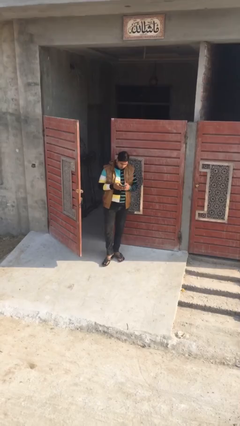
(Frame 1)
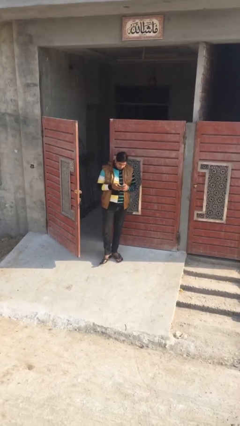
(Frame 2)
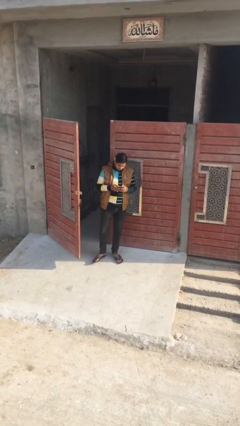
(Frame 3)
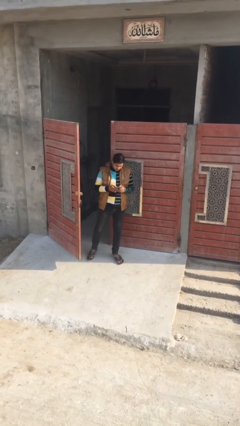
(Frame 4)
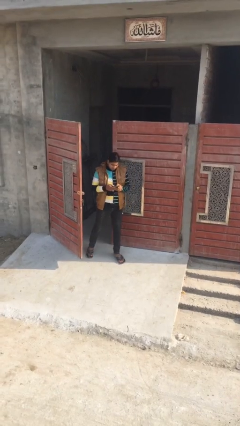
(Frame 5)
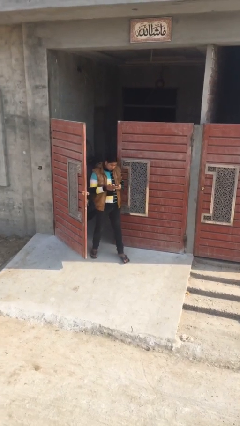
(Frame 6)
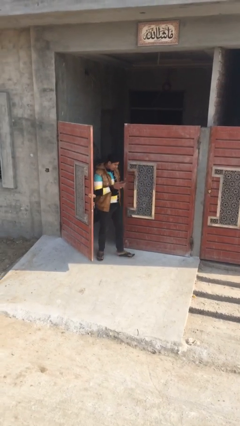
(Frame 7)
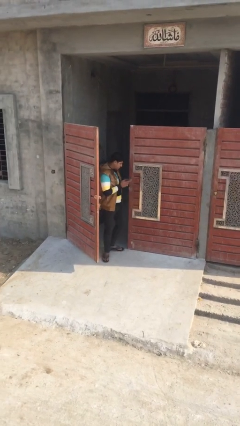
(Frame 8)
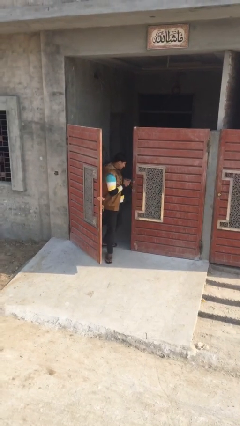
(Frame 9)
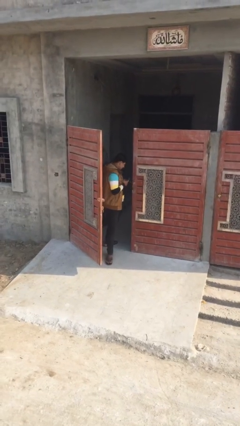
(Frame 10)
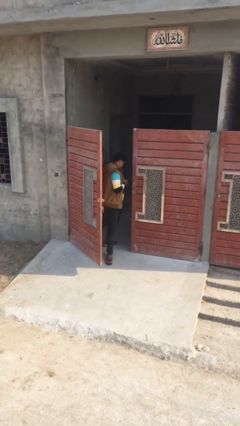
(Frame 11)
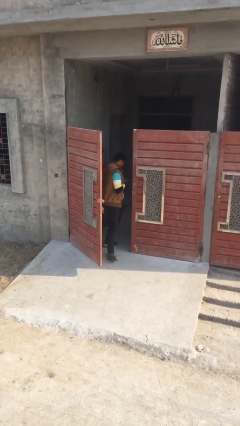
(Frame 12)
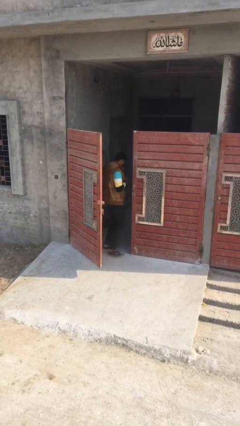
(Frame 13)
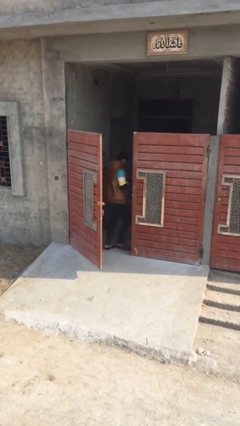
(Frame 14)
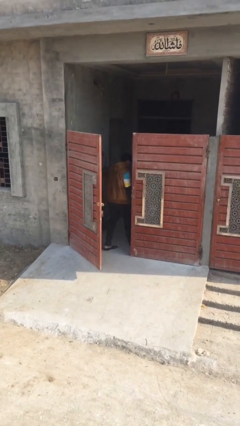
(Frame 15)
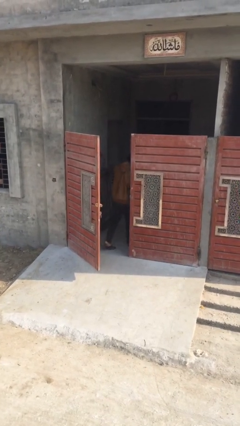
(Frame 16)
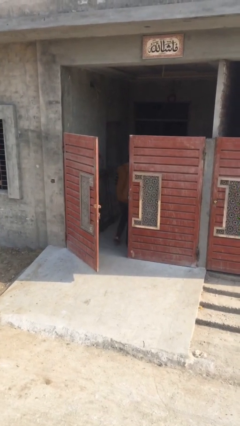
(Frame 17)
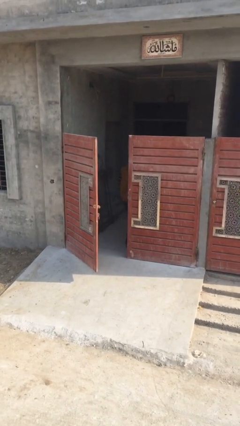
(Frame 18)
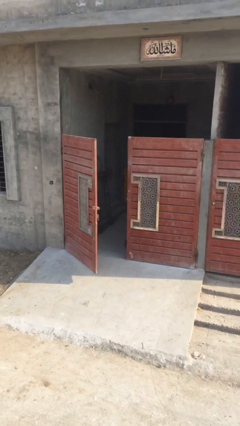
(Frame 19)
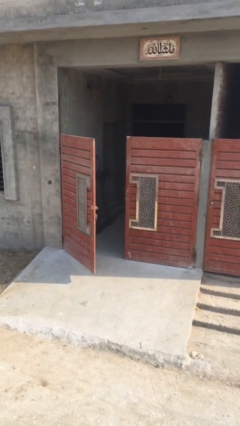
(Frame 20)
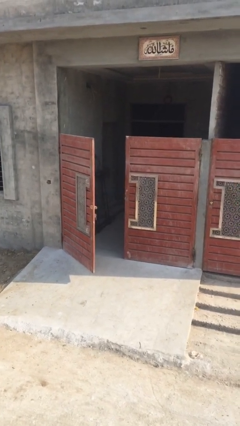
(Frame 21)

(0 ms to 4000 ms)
person exits scene through structure

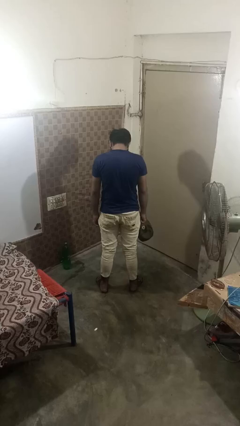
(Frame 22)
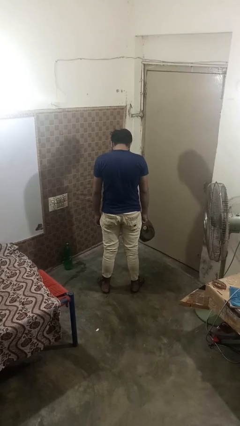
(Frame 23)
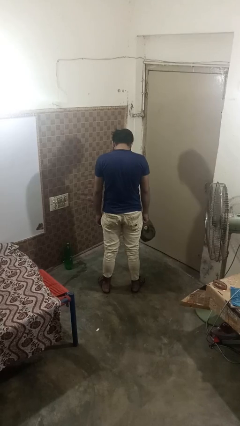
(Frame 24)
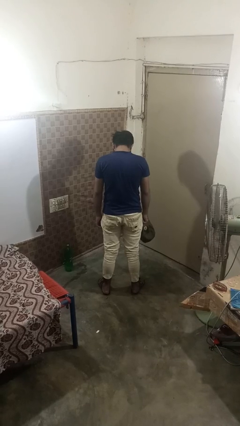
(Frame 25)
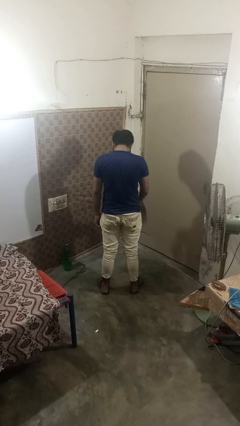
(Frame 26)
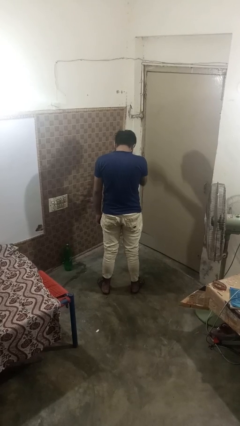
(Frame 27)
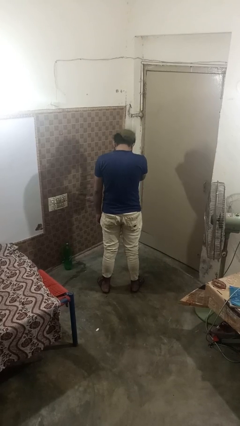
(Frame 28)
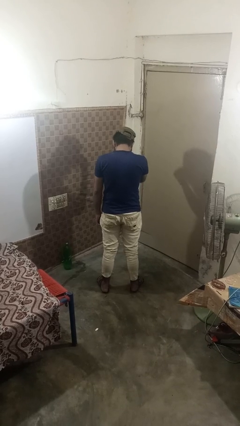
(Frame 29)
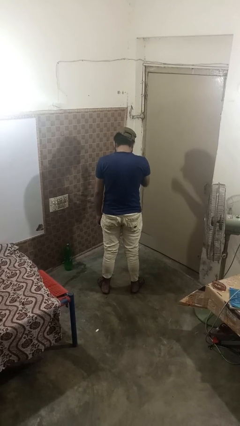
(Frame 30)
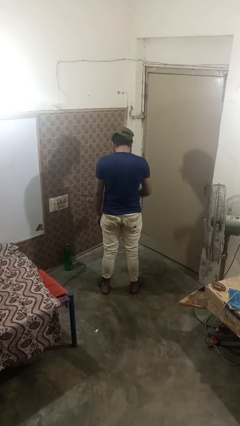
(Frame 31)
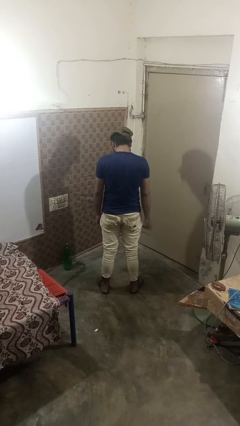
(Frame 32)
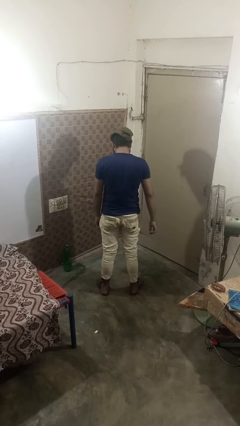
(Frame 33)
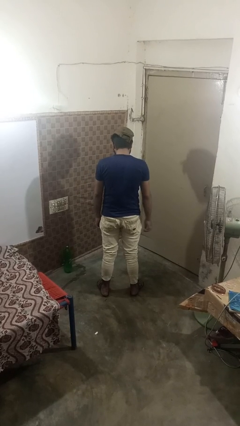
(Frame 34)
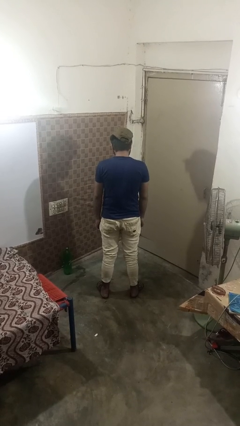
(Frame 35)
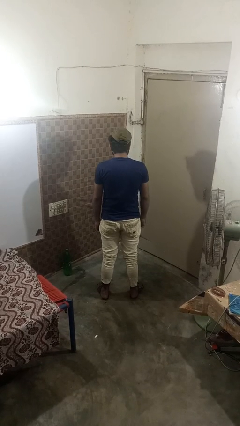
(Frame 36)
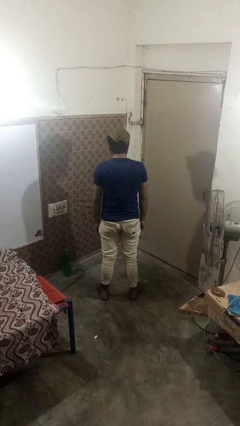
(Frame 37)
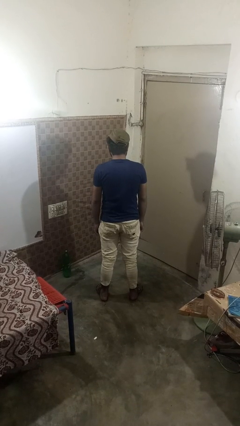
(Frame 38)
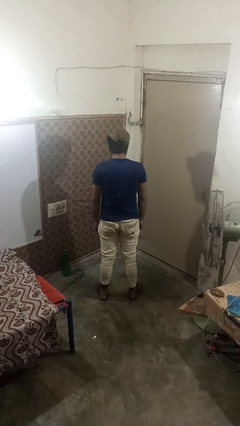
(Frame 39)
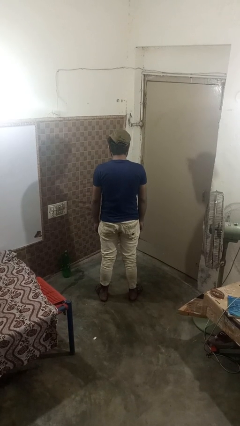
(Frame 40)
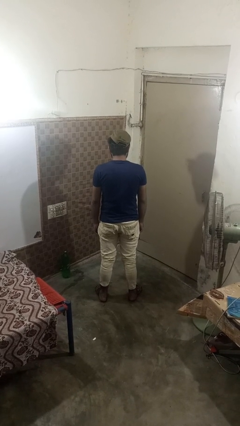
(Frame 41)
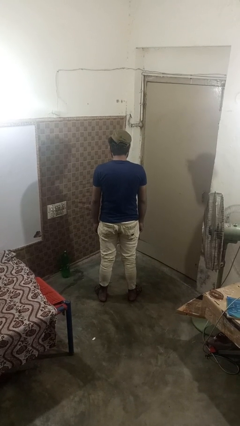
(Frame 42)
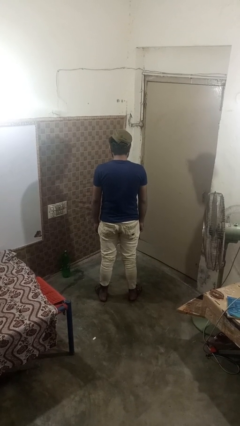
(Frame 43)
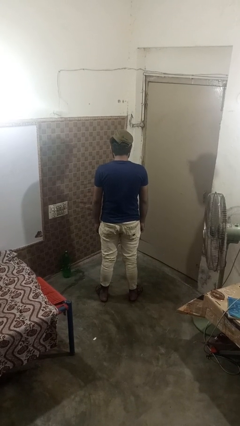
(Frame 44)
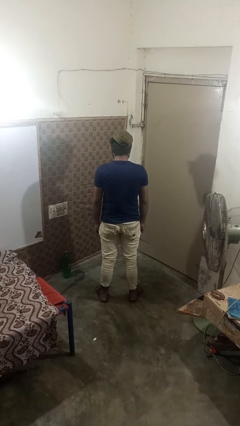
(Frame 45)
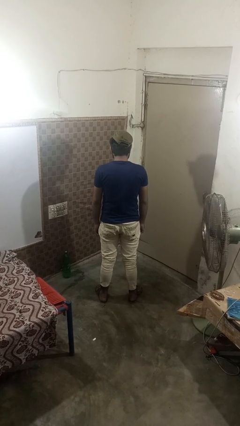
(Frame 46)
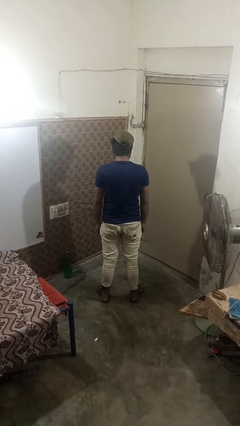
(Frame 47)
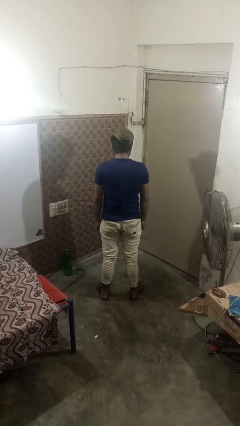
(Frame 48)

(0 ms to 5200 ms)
person puts on hat

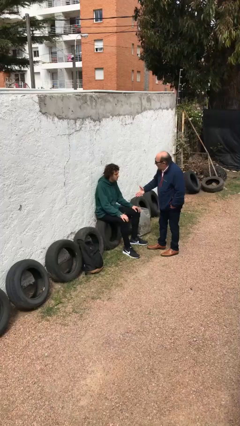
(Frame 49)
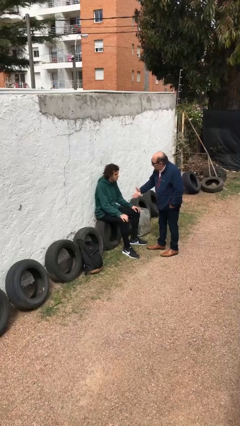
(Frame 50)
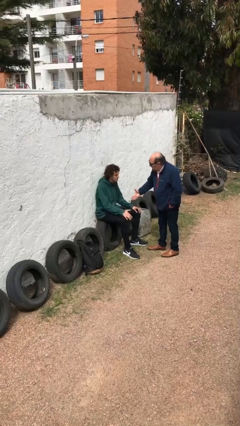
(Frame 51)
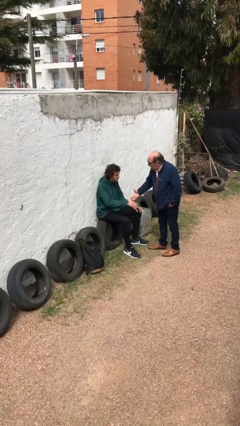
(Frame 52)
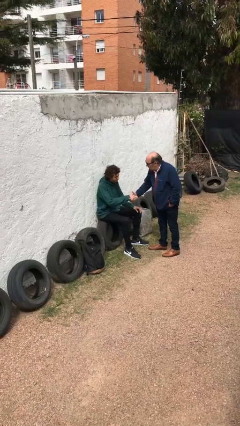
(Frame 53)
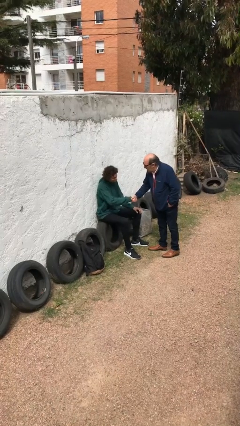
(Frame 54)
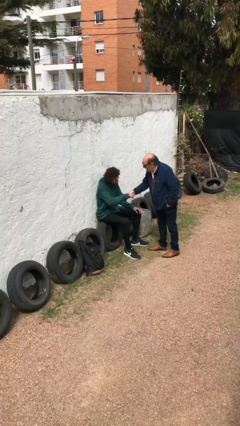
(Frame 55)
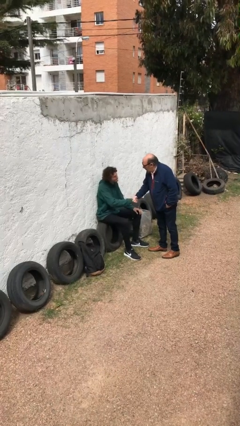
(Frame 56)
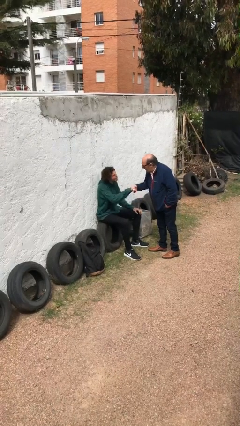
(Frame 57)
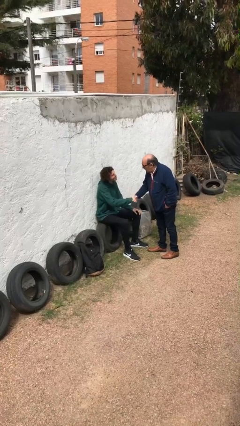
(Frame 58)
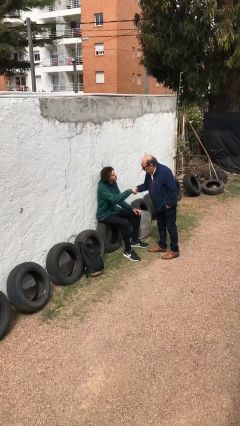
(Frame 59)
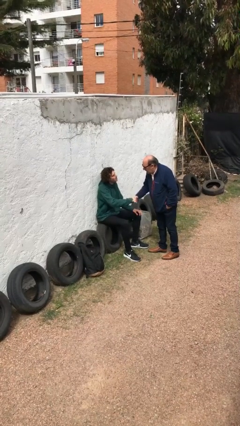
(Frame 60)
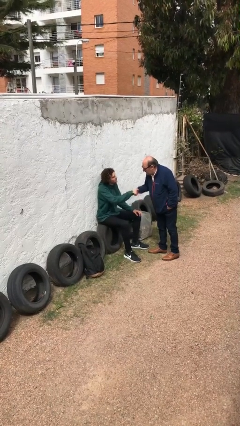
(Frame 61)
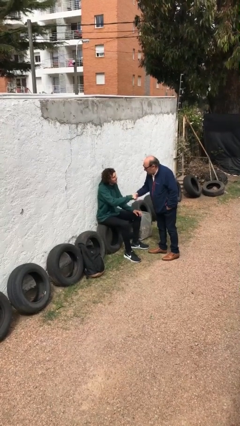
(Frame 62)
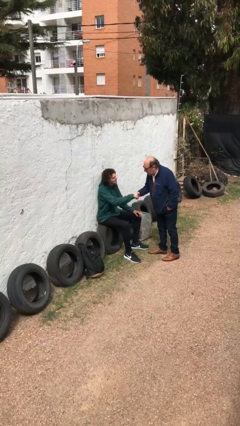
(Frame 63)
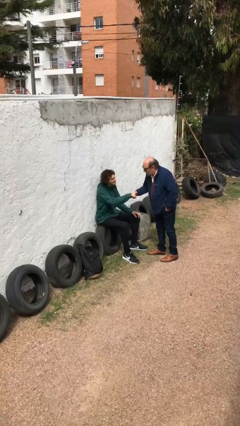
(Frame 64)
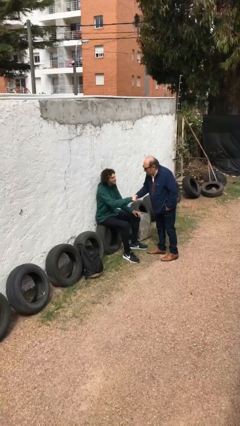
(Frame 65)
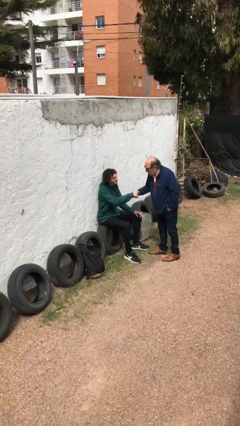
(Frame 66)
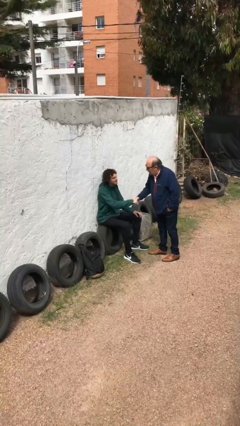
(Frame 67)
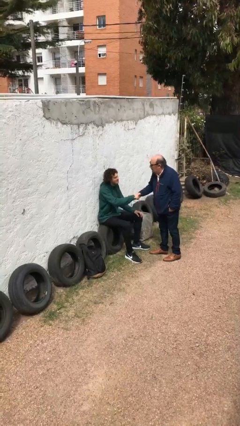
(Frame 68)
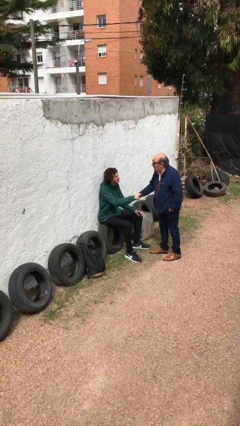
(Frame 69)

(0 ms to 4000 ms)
person shakes hand

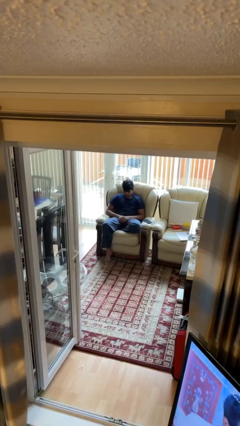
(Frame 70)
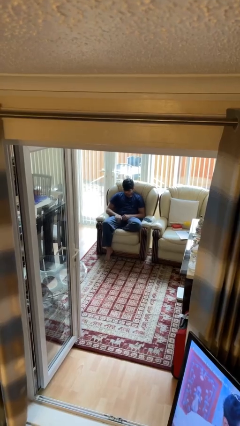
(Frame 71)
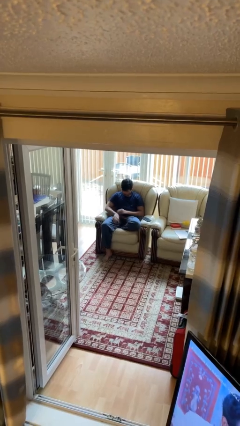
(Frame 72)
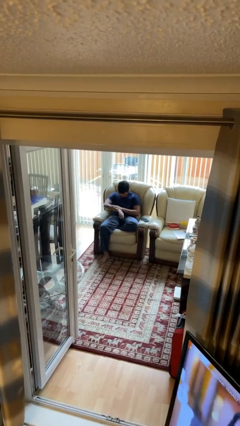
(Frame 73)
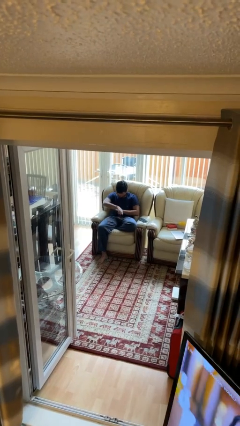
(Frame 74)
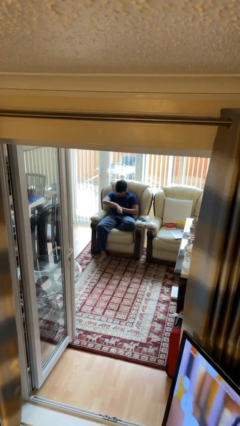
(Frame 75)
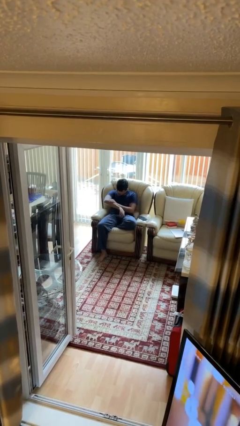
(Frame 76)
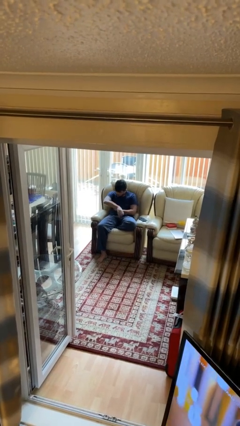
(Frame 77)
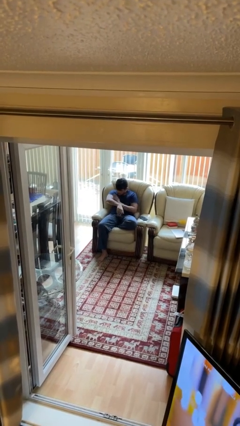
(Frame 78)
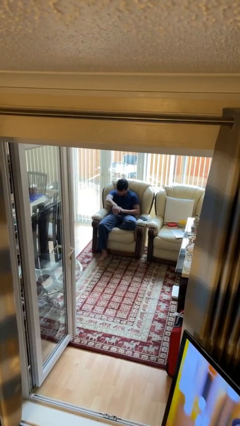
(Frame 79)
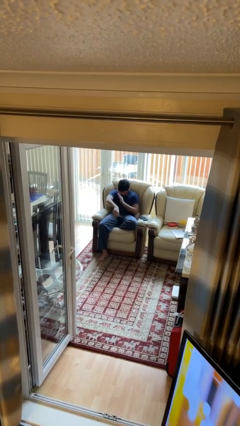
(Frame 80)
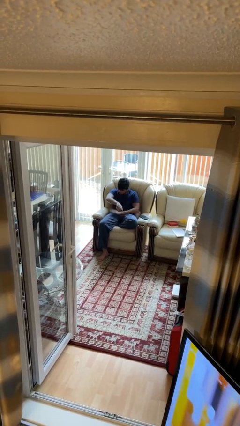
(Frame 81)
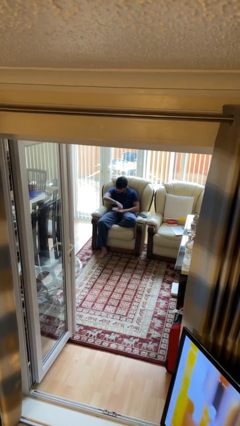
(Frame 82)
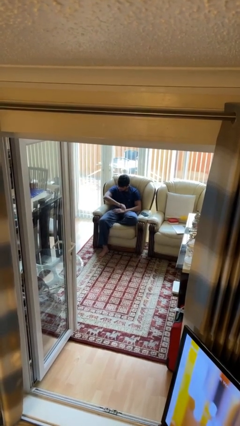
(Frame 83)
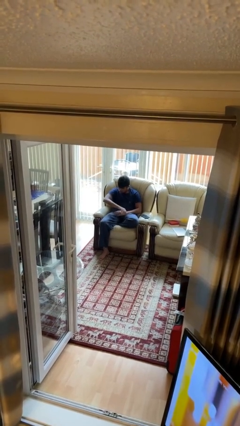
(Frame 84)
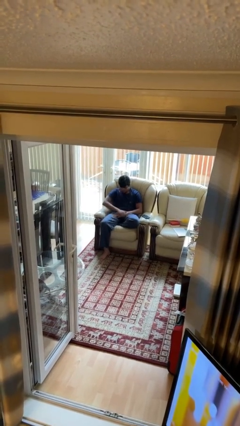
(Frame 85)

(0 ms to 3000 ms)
person swats bug

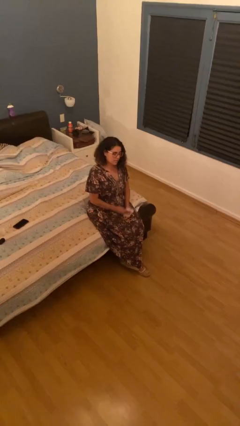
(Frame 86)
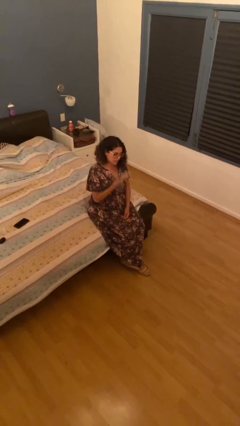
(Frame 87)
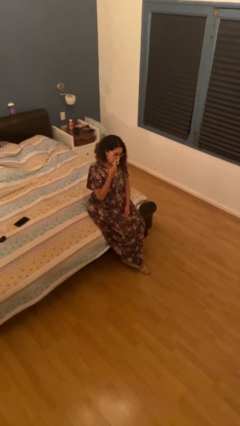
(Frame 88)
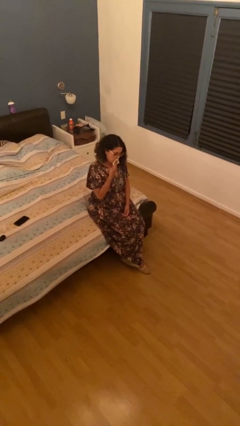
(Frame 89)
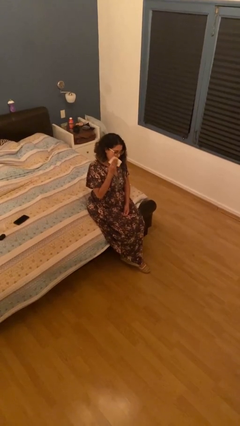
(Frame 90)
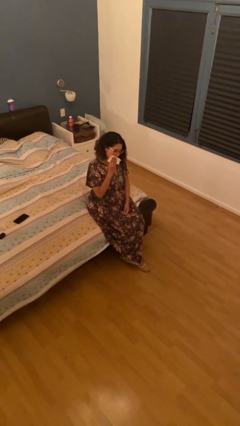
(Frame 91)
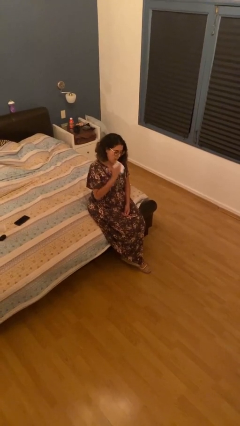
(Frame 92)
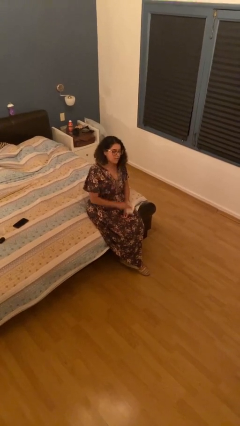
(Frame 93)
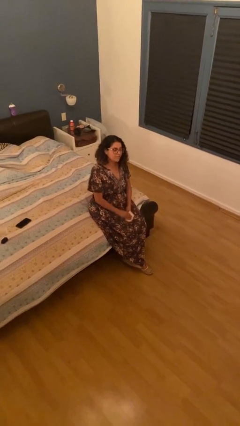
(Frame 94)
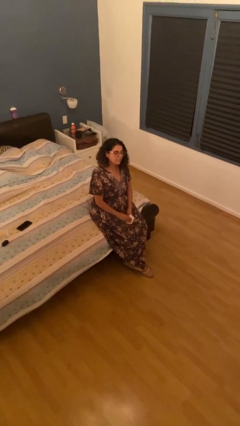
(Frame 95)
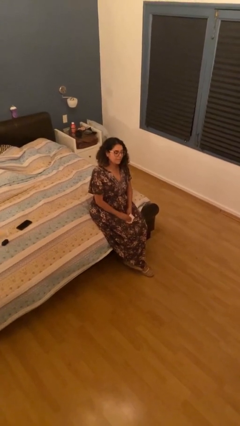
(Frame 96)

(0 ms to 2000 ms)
person wipes mouth with napkin
